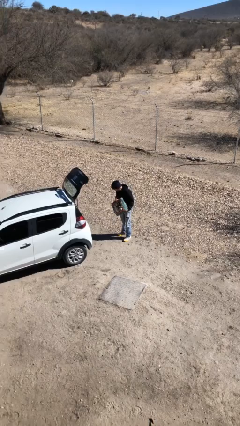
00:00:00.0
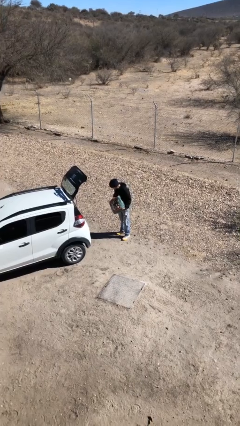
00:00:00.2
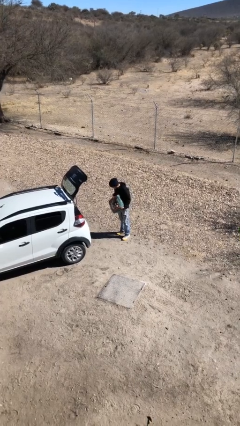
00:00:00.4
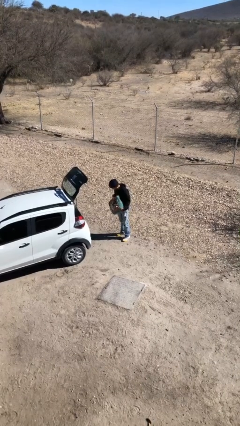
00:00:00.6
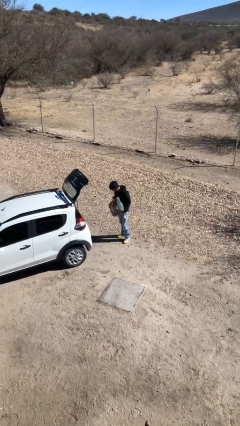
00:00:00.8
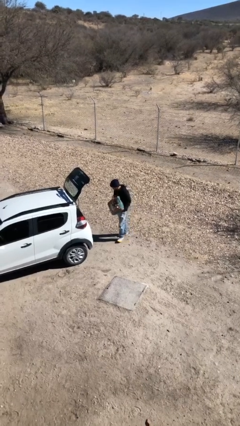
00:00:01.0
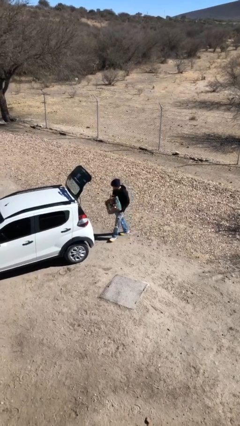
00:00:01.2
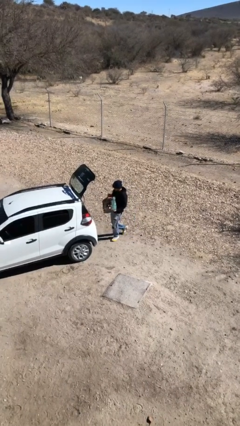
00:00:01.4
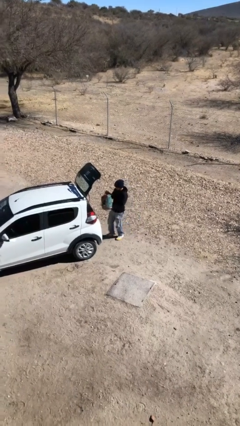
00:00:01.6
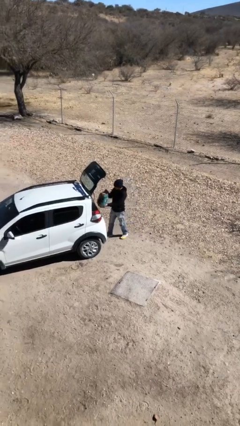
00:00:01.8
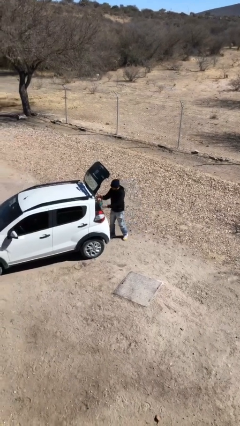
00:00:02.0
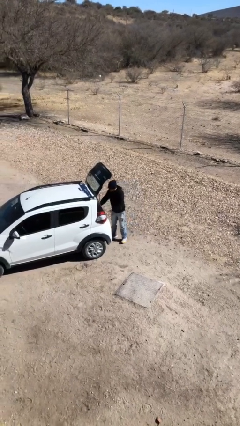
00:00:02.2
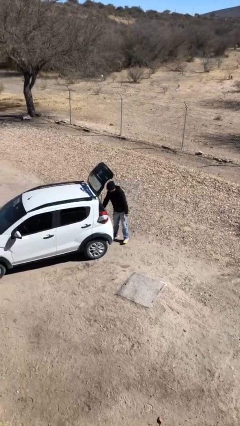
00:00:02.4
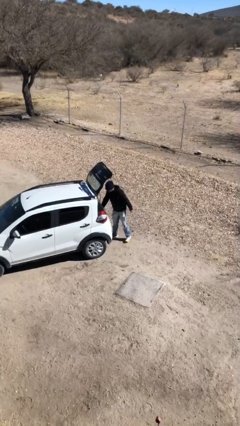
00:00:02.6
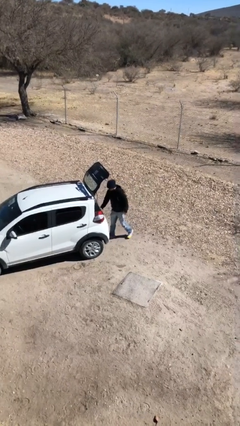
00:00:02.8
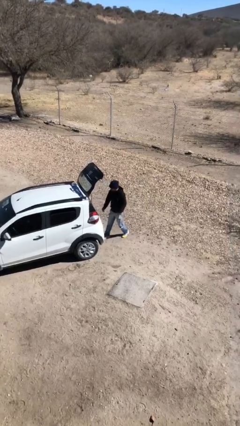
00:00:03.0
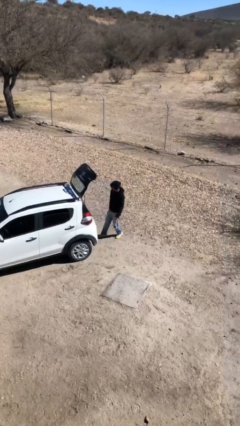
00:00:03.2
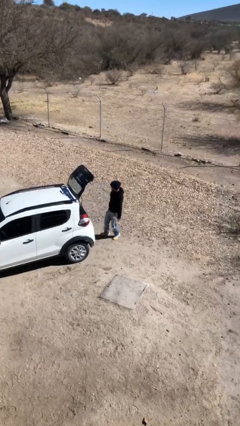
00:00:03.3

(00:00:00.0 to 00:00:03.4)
person loads car

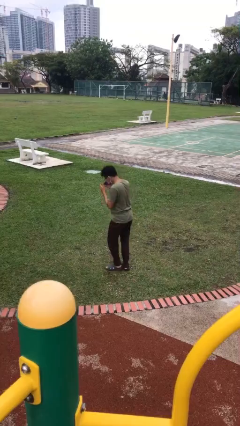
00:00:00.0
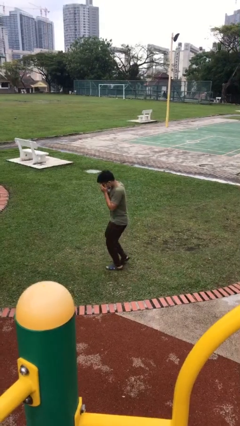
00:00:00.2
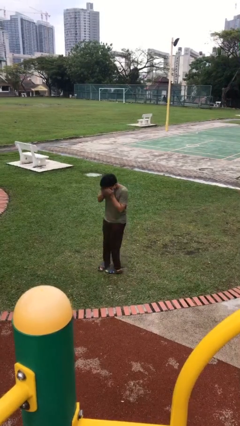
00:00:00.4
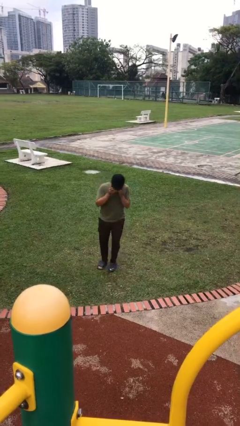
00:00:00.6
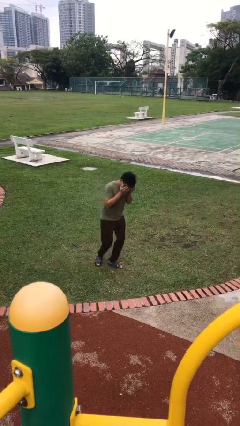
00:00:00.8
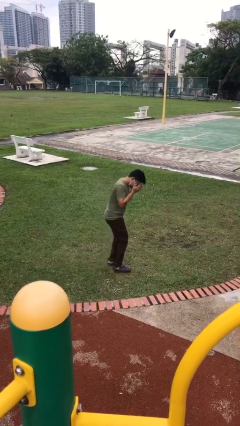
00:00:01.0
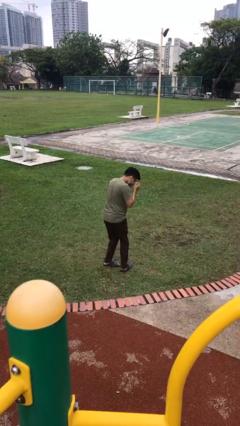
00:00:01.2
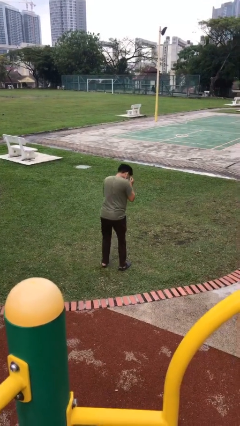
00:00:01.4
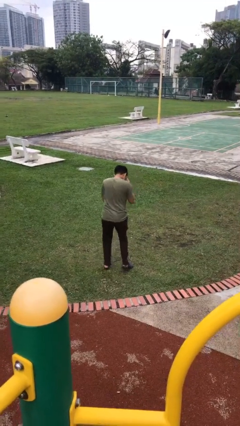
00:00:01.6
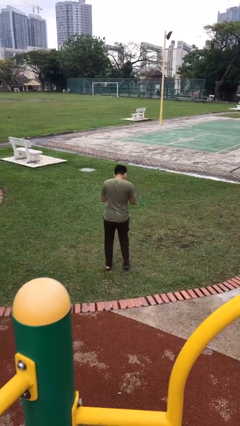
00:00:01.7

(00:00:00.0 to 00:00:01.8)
person twirls

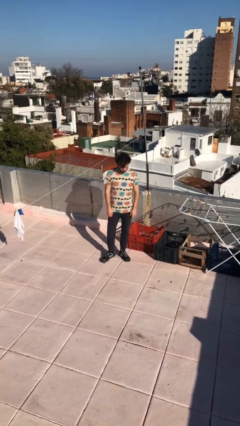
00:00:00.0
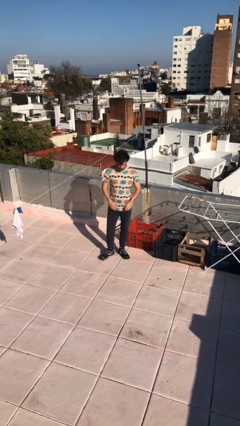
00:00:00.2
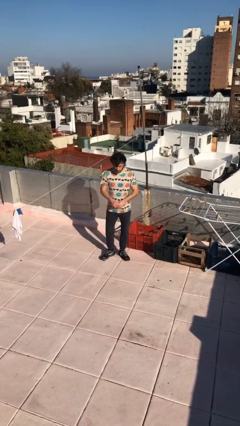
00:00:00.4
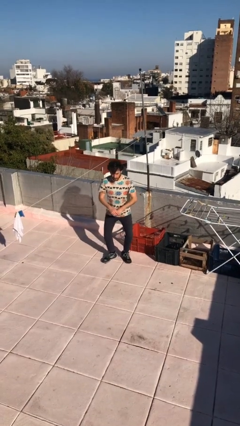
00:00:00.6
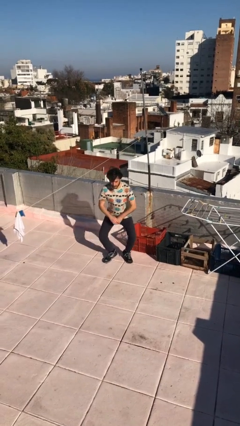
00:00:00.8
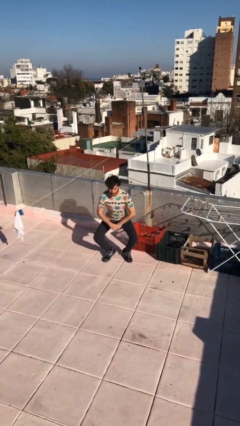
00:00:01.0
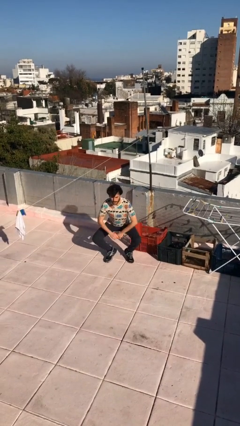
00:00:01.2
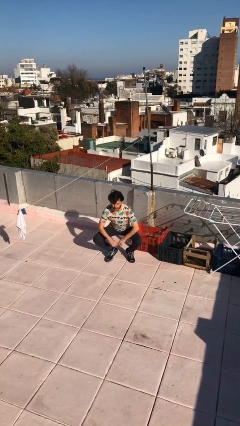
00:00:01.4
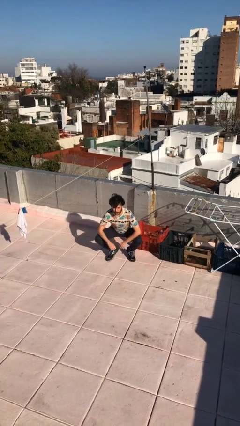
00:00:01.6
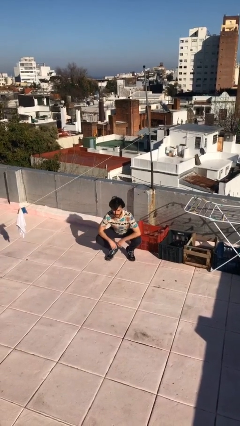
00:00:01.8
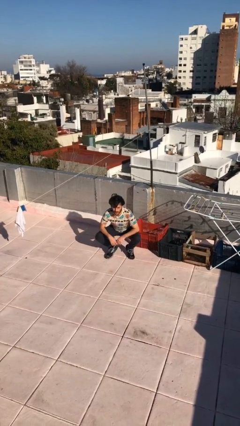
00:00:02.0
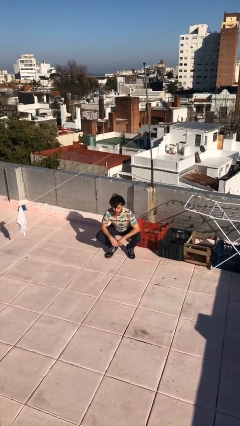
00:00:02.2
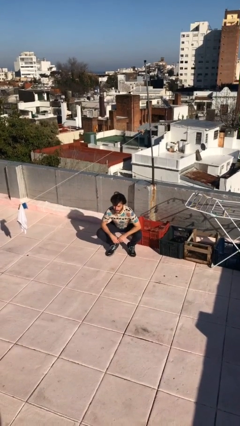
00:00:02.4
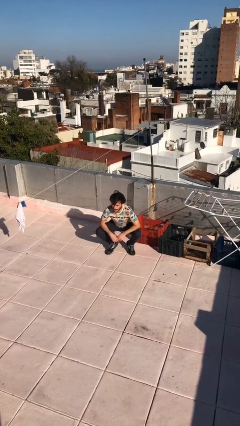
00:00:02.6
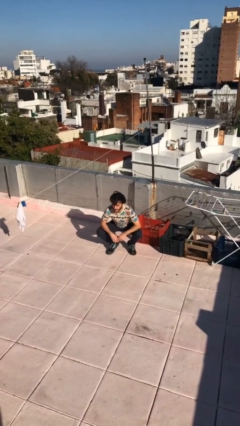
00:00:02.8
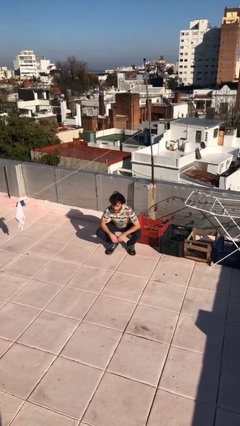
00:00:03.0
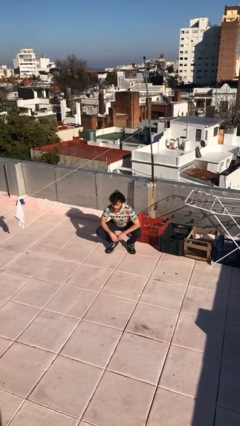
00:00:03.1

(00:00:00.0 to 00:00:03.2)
person squats

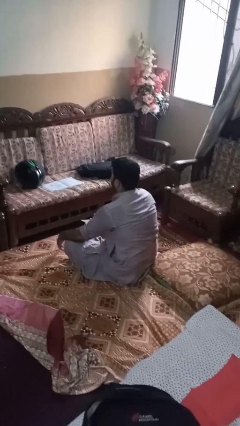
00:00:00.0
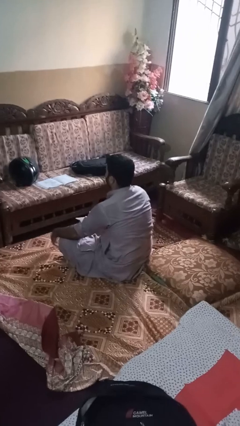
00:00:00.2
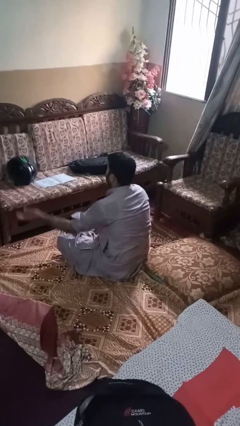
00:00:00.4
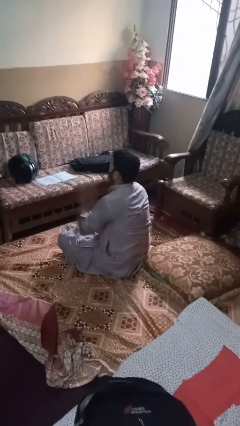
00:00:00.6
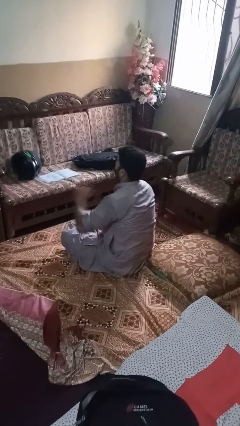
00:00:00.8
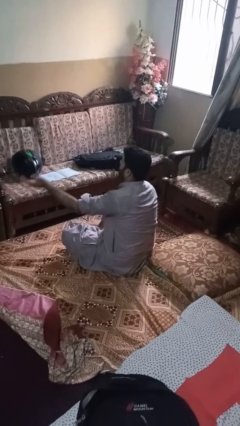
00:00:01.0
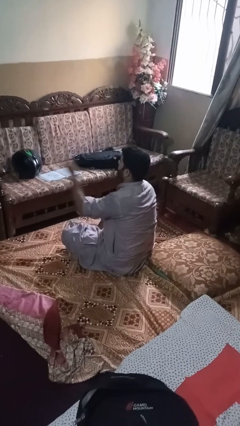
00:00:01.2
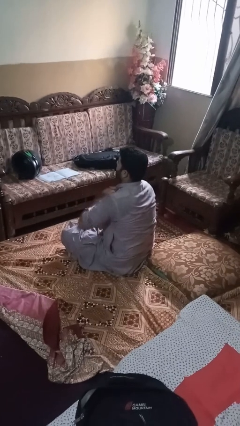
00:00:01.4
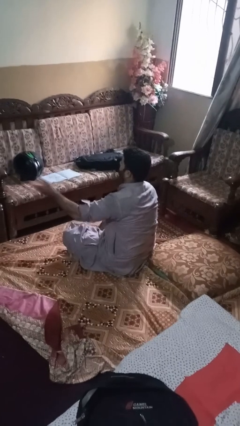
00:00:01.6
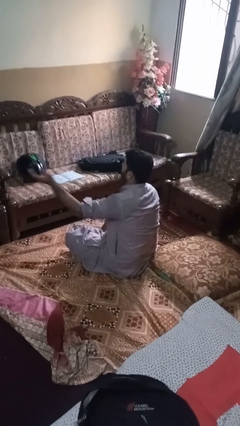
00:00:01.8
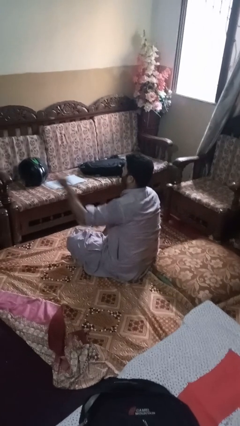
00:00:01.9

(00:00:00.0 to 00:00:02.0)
person drums on chest

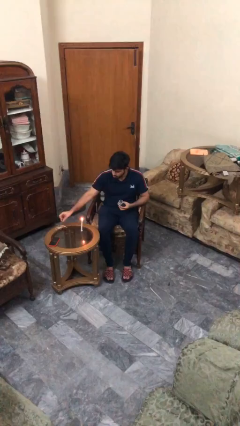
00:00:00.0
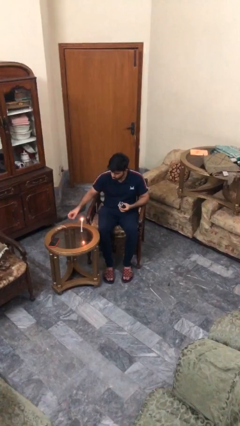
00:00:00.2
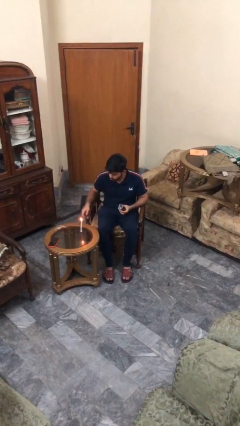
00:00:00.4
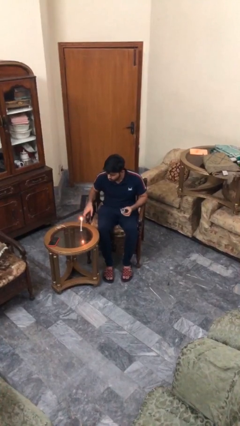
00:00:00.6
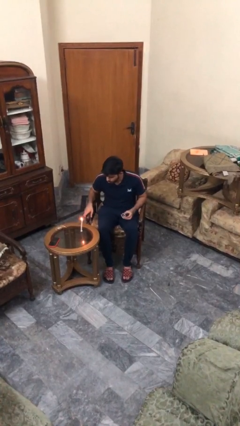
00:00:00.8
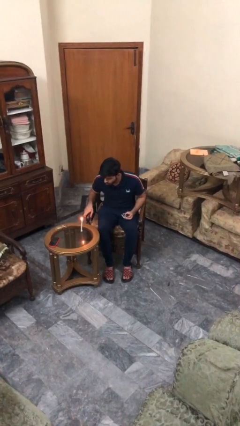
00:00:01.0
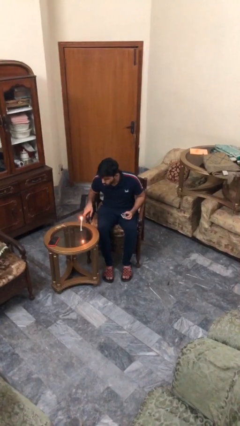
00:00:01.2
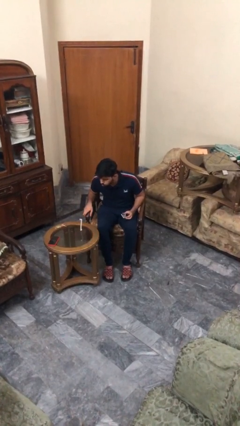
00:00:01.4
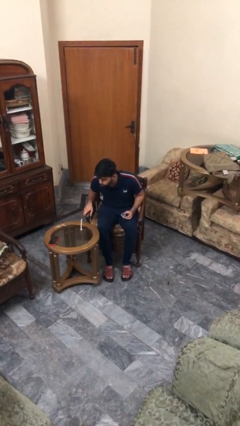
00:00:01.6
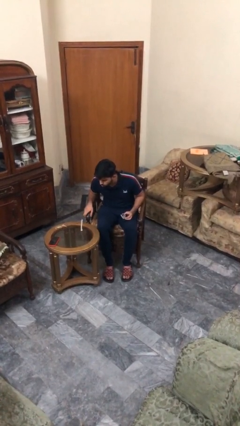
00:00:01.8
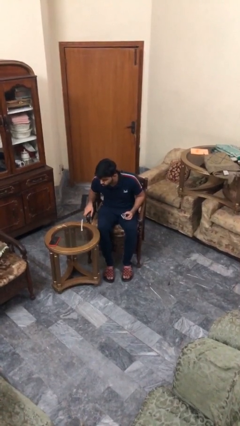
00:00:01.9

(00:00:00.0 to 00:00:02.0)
person extinguishes candle

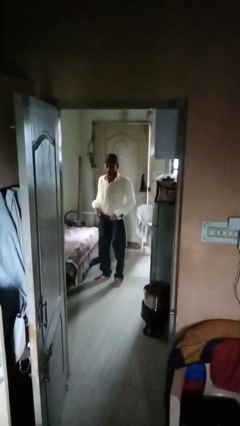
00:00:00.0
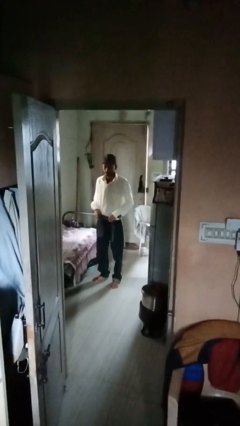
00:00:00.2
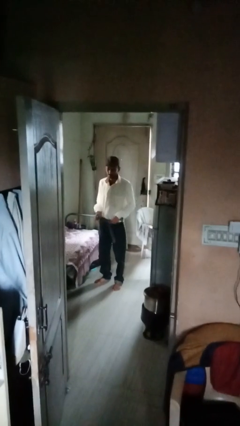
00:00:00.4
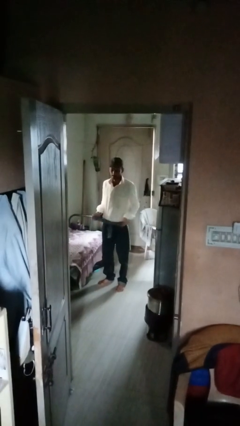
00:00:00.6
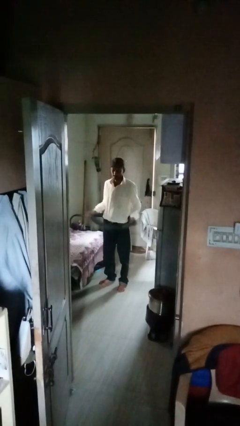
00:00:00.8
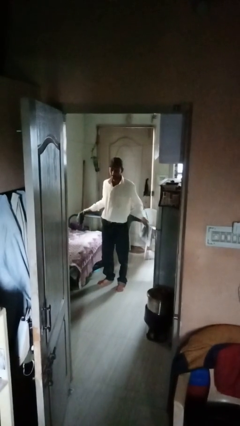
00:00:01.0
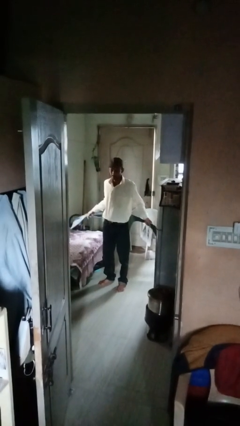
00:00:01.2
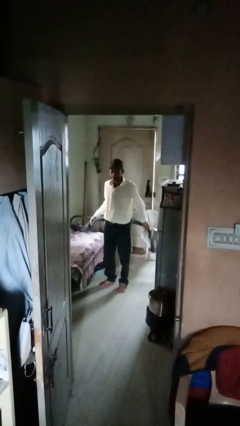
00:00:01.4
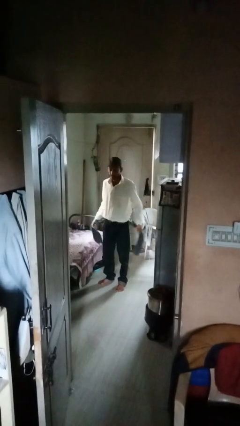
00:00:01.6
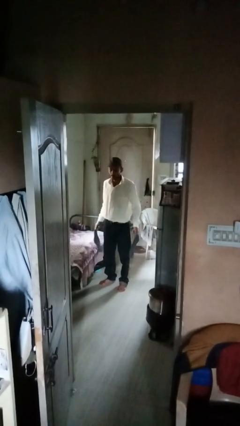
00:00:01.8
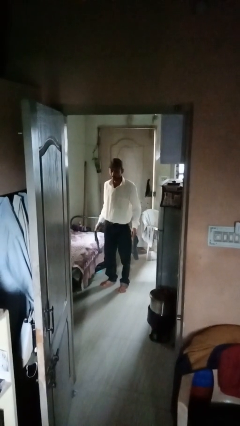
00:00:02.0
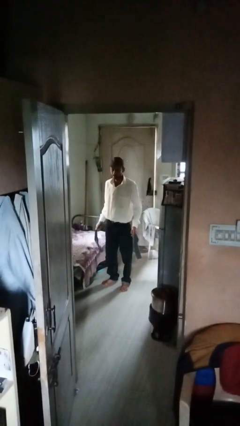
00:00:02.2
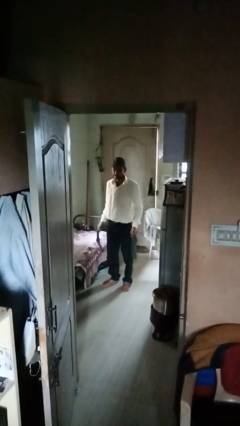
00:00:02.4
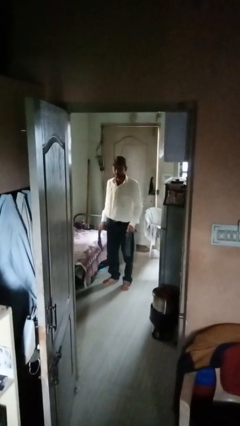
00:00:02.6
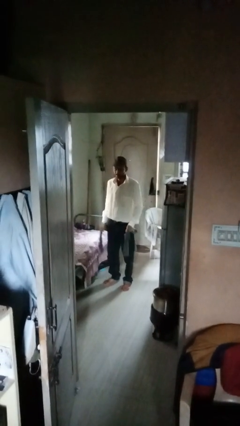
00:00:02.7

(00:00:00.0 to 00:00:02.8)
person unties jacket around waist

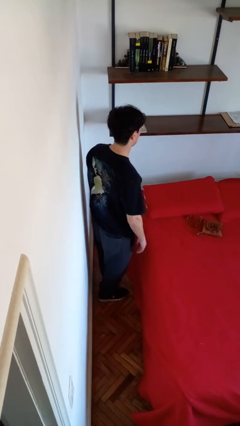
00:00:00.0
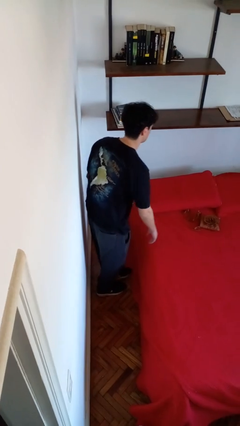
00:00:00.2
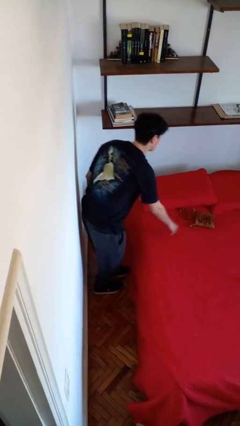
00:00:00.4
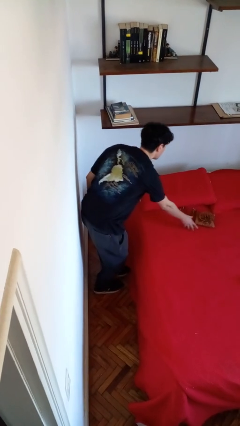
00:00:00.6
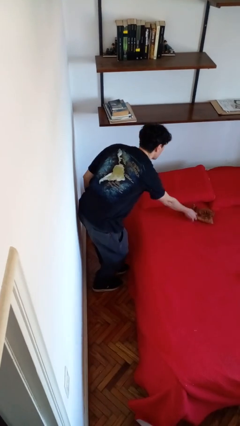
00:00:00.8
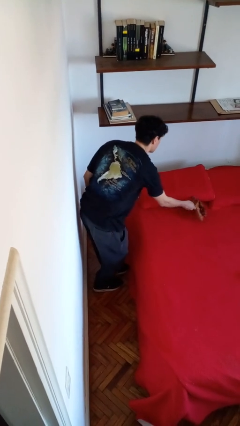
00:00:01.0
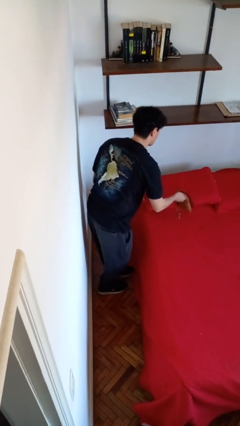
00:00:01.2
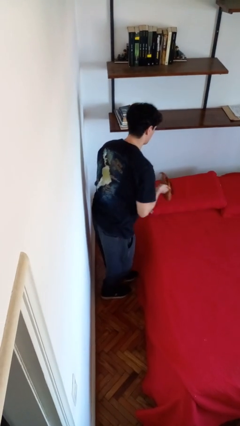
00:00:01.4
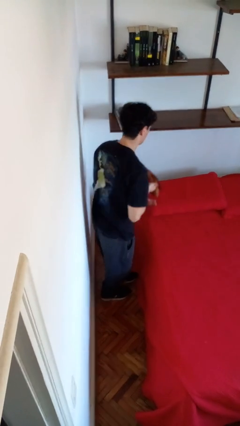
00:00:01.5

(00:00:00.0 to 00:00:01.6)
person picks up object from bed

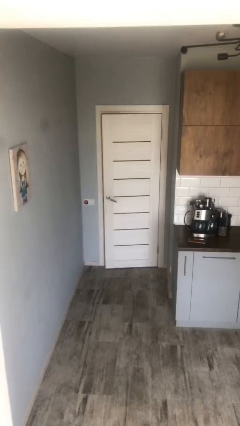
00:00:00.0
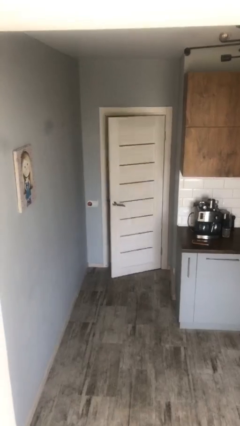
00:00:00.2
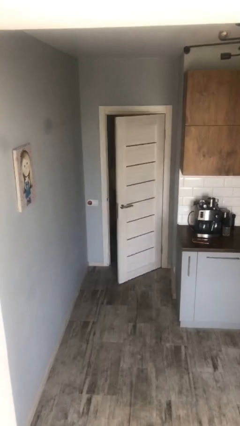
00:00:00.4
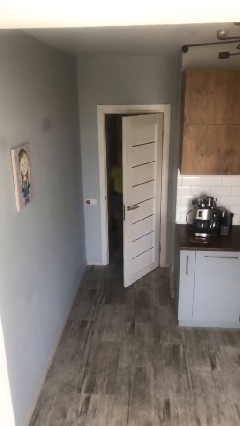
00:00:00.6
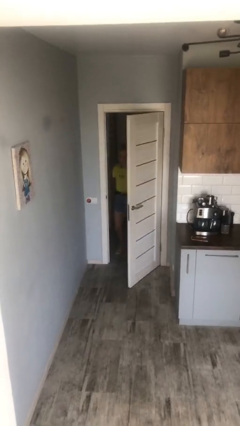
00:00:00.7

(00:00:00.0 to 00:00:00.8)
person opens facility door
